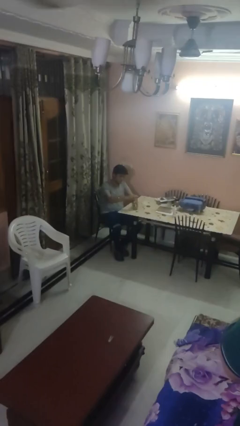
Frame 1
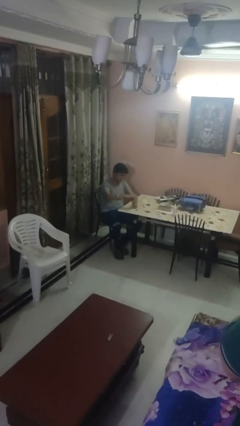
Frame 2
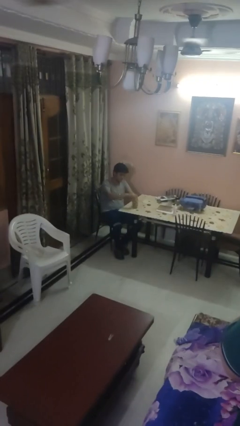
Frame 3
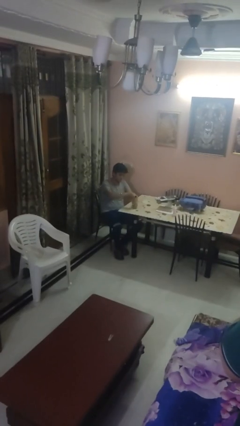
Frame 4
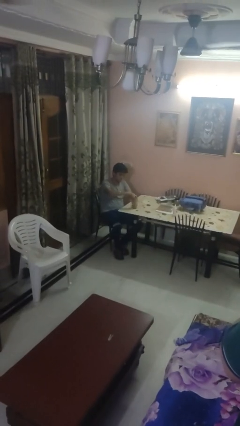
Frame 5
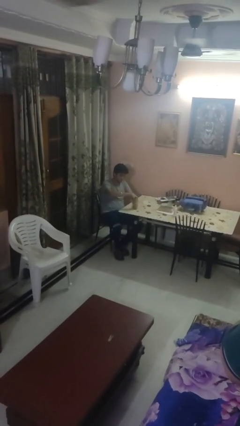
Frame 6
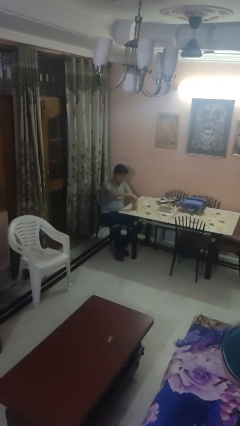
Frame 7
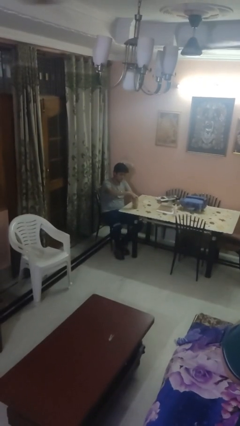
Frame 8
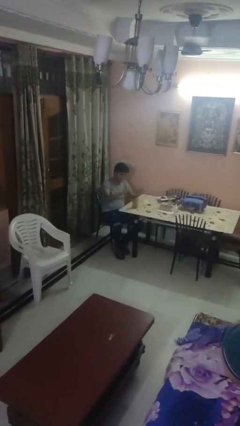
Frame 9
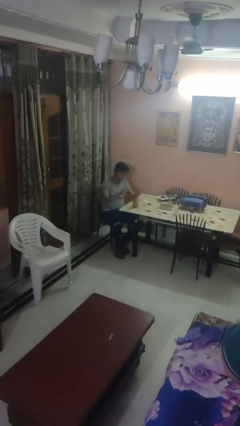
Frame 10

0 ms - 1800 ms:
person screws lid to bottle

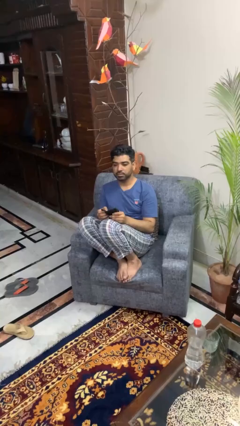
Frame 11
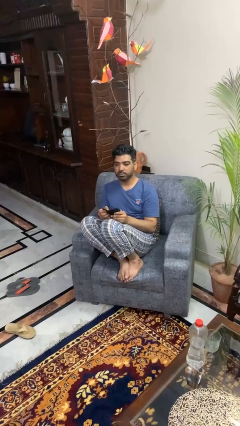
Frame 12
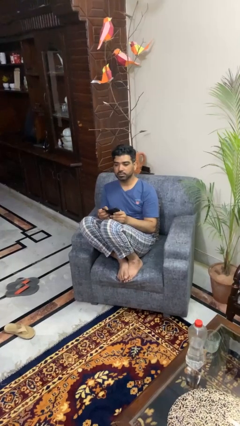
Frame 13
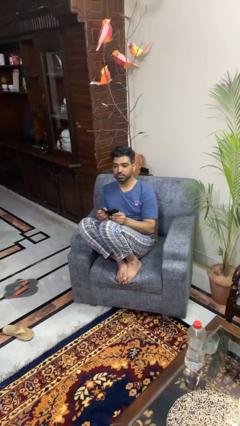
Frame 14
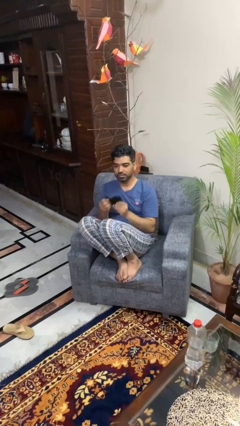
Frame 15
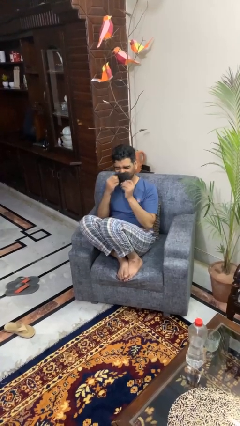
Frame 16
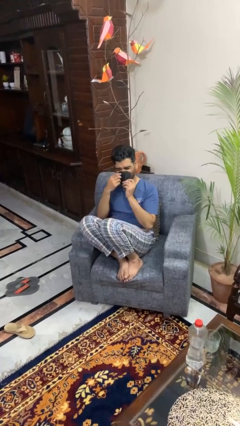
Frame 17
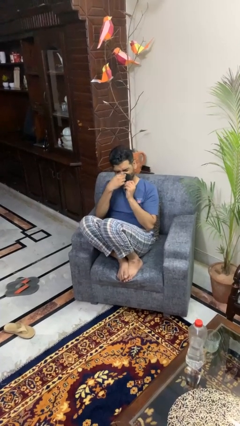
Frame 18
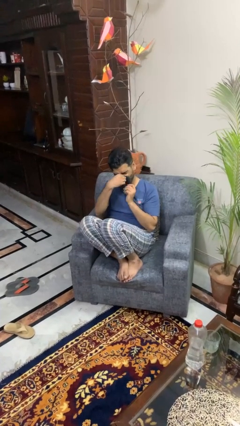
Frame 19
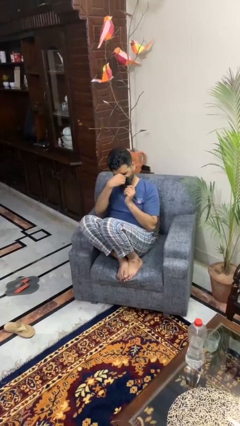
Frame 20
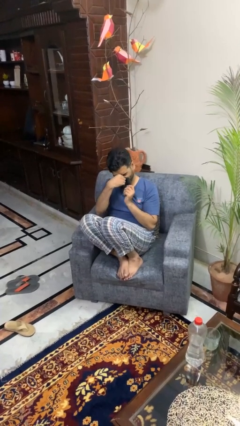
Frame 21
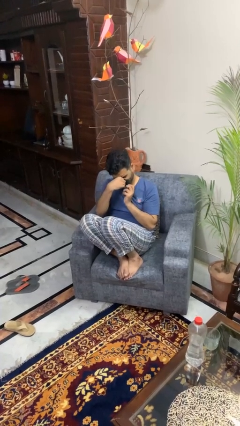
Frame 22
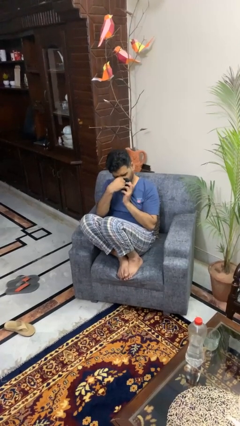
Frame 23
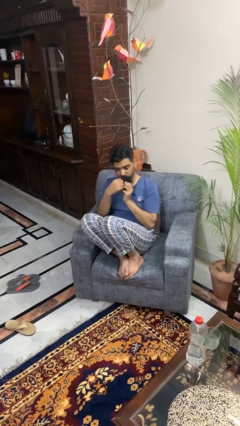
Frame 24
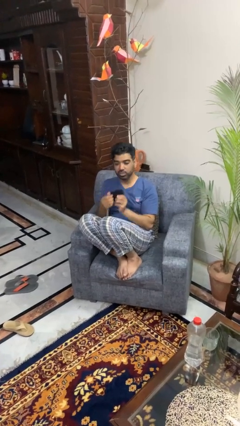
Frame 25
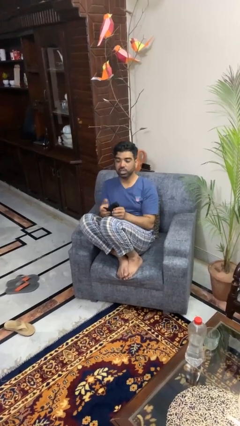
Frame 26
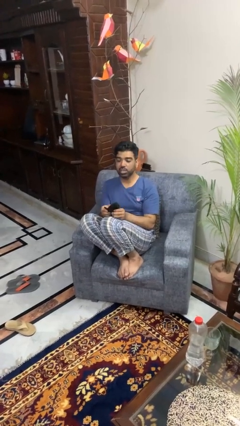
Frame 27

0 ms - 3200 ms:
person blows nose

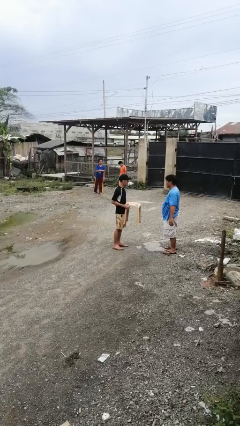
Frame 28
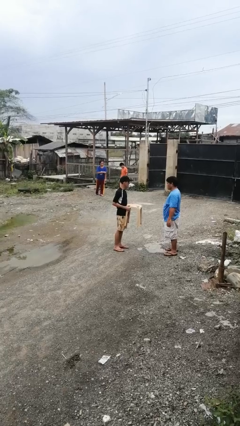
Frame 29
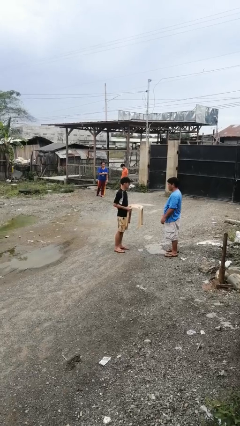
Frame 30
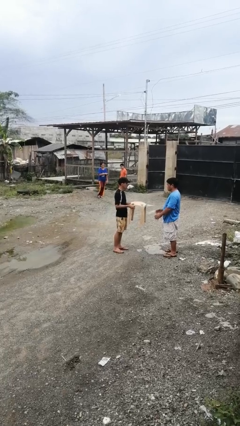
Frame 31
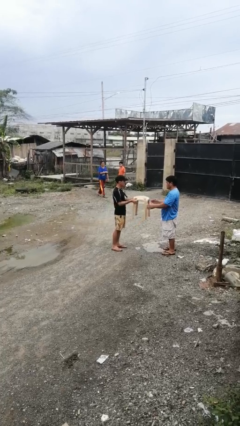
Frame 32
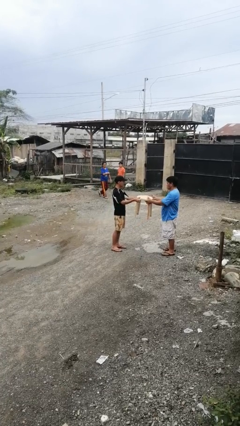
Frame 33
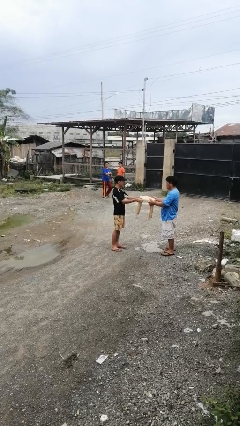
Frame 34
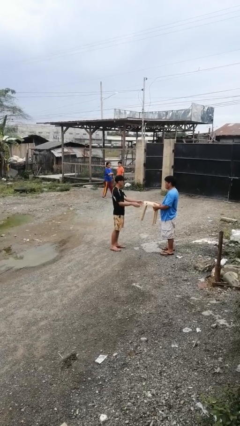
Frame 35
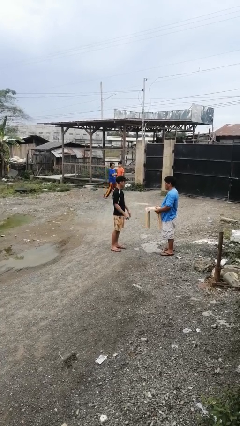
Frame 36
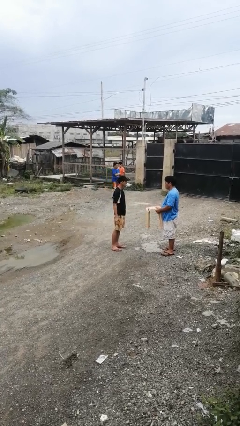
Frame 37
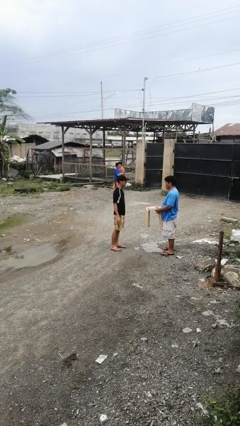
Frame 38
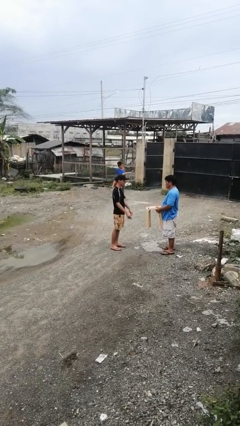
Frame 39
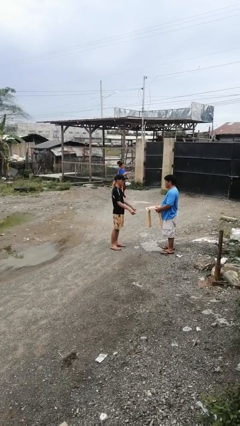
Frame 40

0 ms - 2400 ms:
person transfers object to person

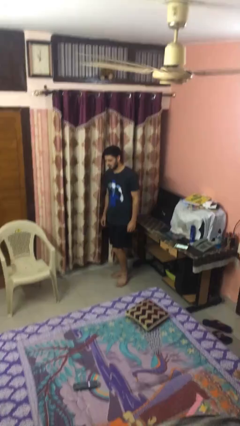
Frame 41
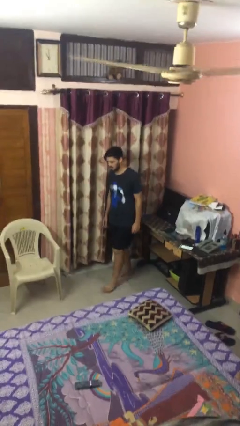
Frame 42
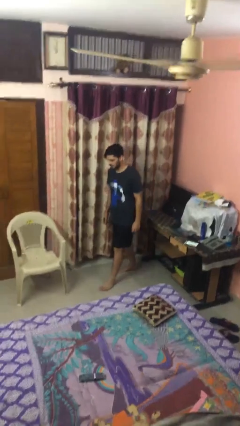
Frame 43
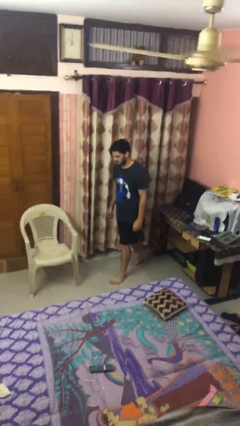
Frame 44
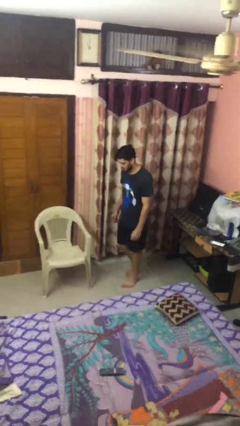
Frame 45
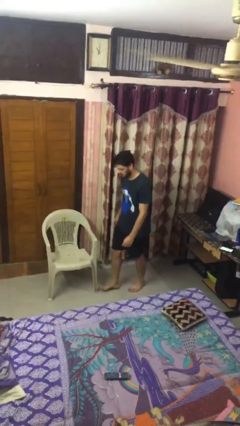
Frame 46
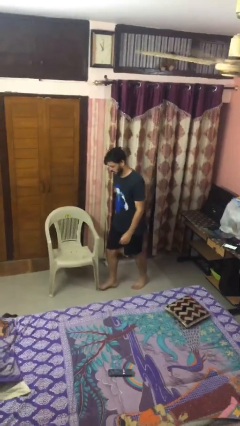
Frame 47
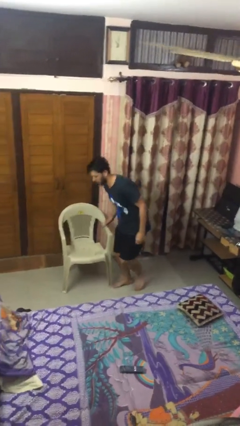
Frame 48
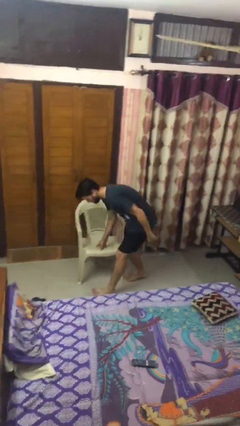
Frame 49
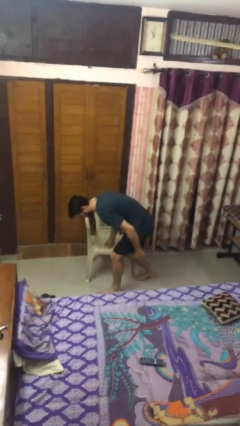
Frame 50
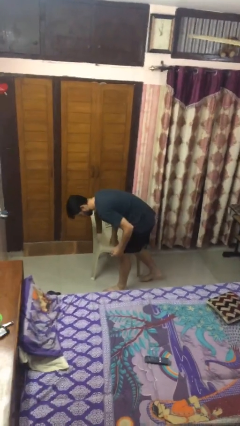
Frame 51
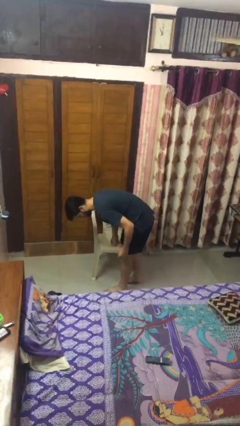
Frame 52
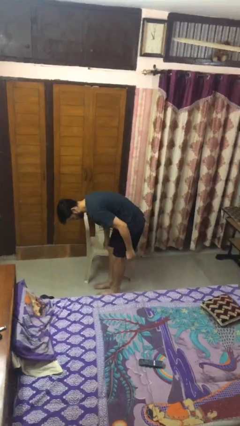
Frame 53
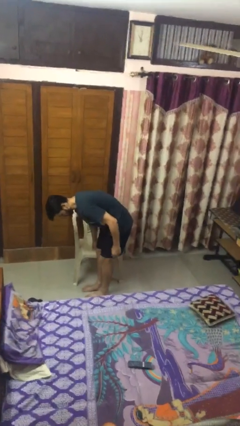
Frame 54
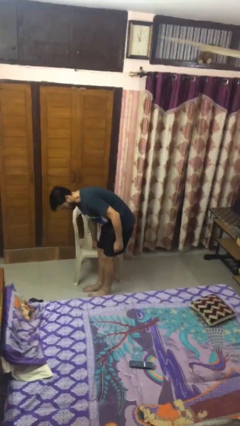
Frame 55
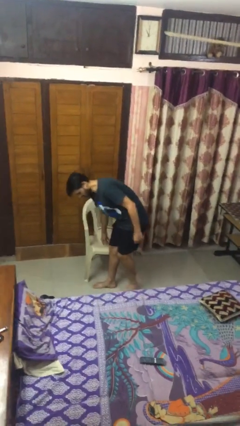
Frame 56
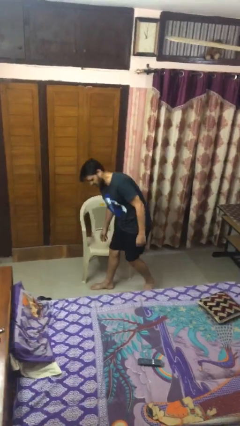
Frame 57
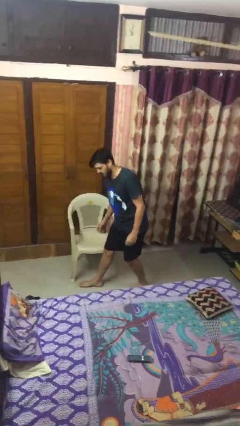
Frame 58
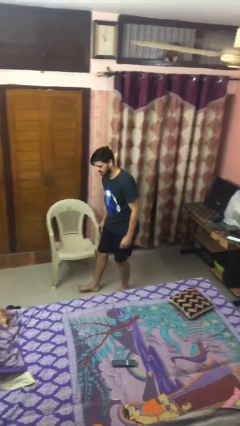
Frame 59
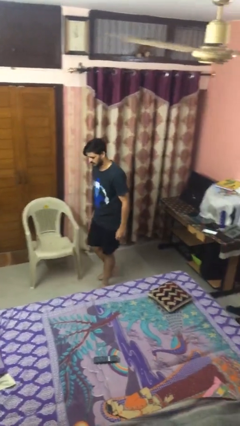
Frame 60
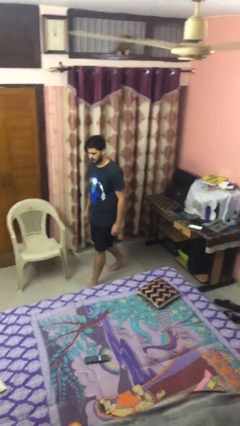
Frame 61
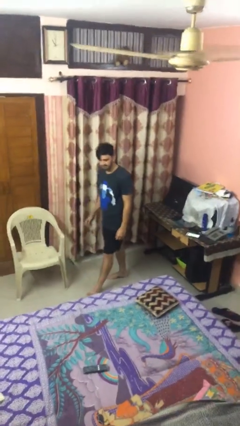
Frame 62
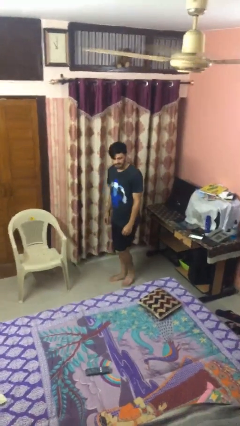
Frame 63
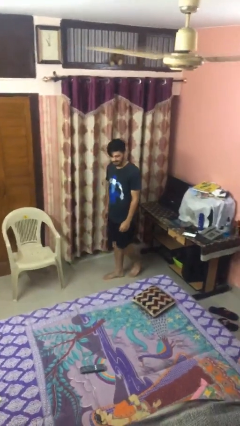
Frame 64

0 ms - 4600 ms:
person stubs toe

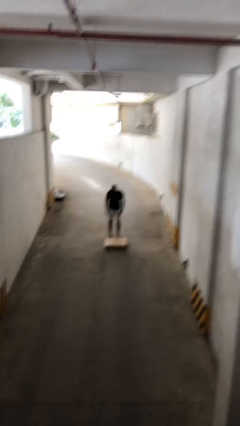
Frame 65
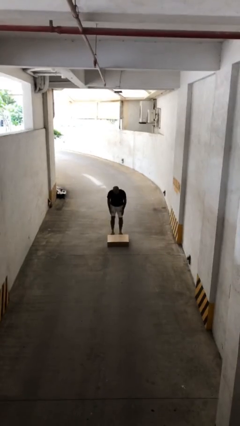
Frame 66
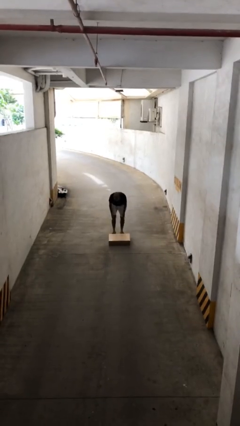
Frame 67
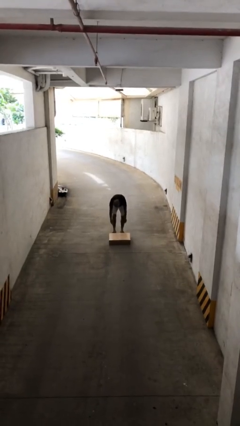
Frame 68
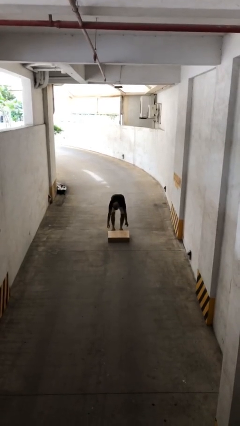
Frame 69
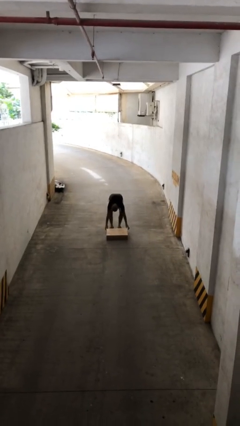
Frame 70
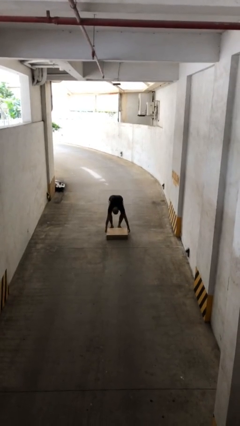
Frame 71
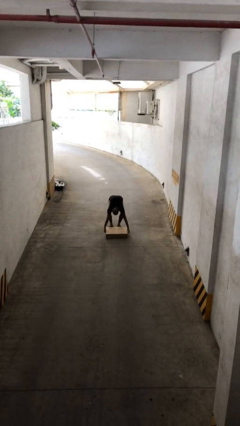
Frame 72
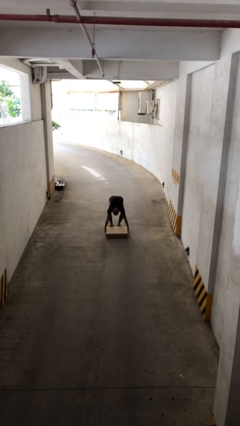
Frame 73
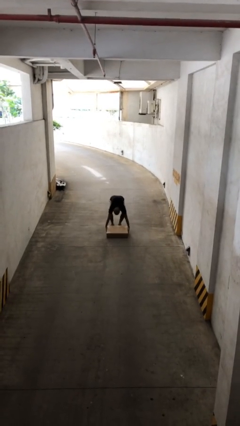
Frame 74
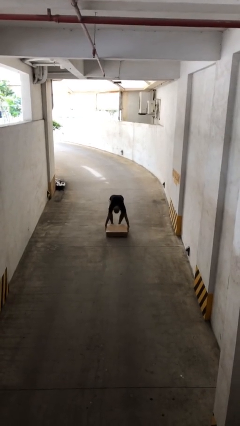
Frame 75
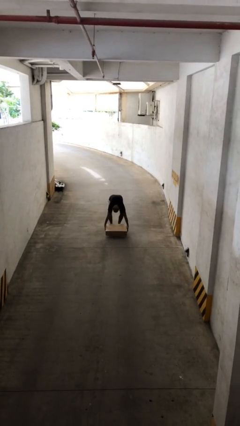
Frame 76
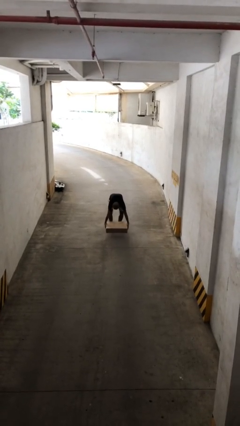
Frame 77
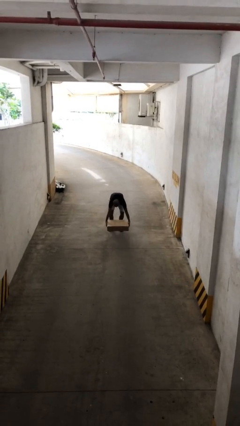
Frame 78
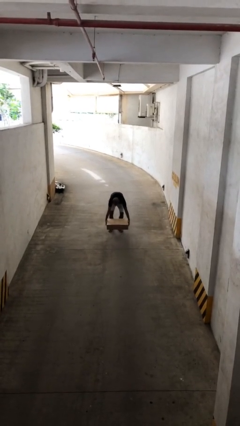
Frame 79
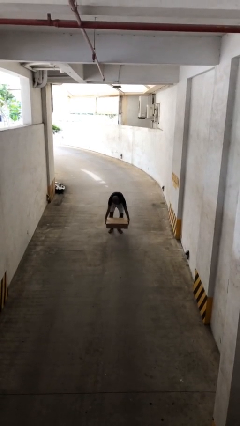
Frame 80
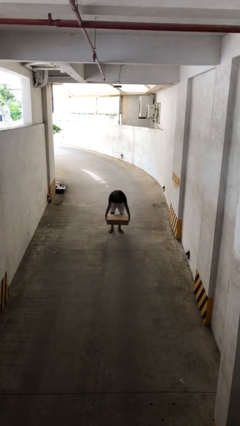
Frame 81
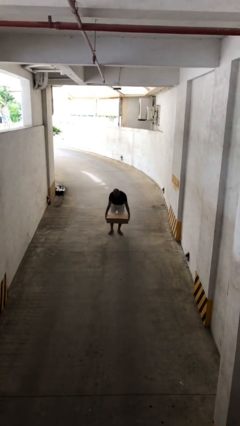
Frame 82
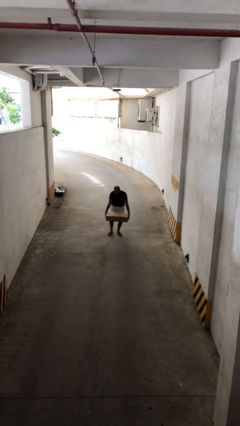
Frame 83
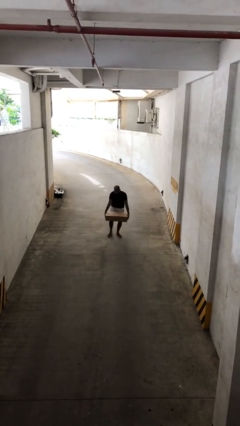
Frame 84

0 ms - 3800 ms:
person picks up object from floor

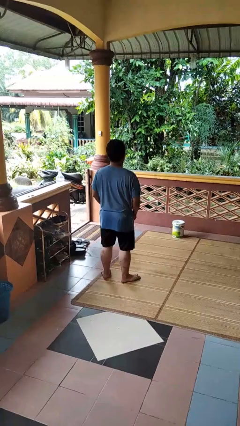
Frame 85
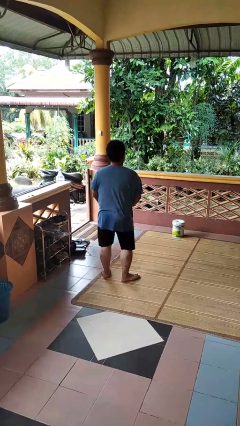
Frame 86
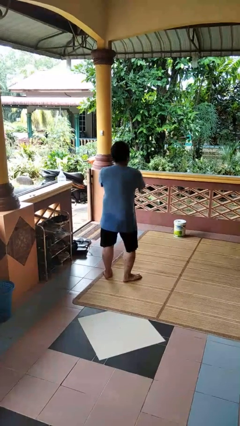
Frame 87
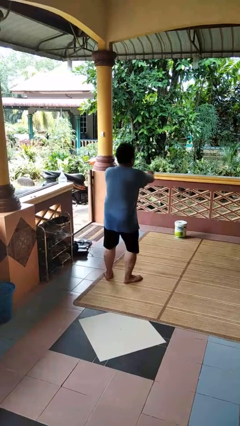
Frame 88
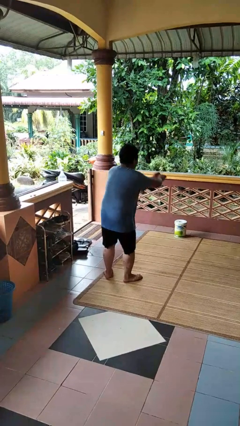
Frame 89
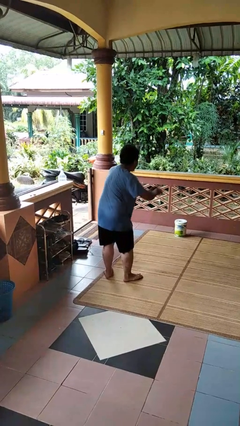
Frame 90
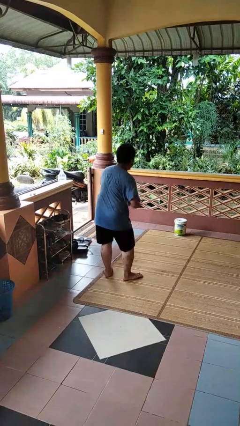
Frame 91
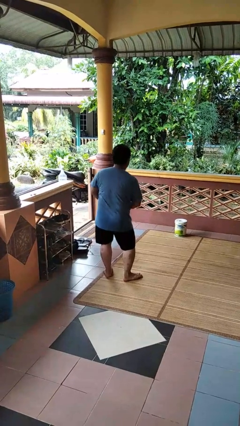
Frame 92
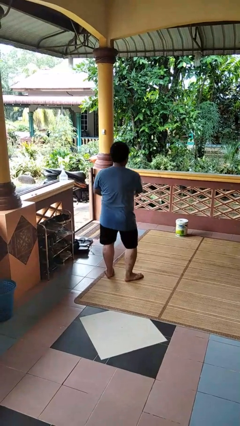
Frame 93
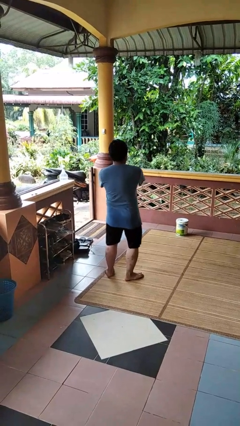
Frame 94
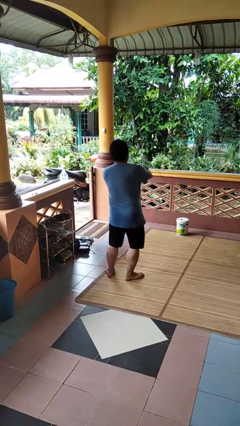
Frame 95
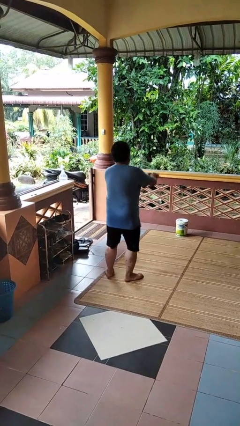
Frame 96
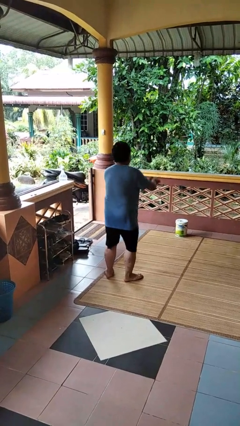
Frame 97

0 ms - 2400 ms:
person dances in place
